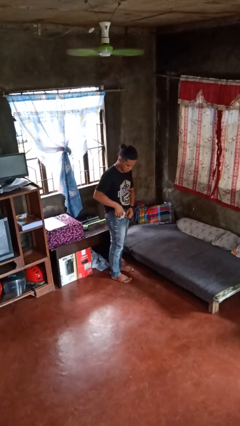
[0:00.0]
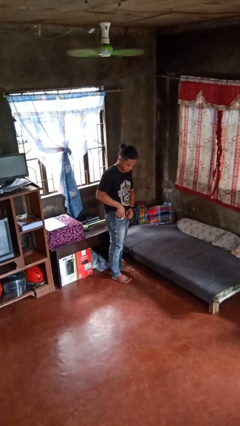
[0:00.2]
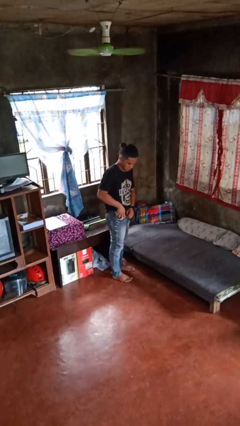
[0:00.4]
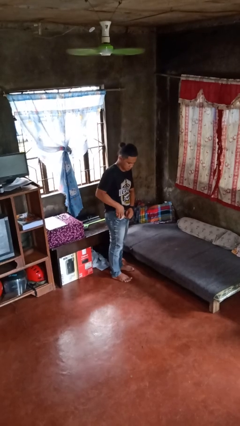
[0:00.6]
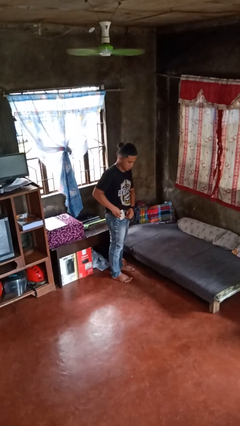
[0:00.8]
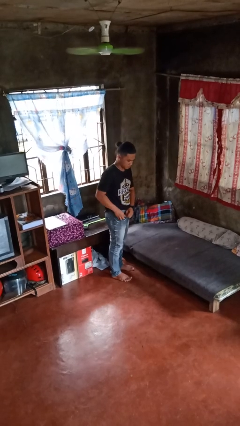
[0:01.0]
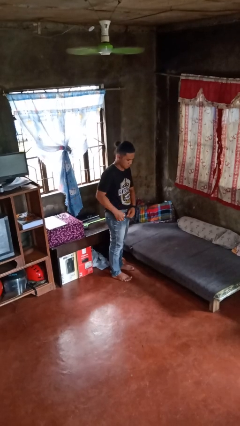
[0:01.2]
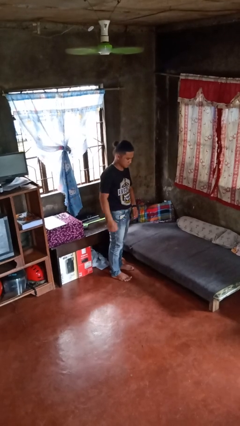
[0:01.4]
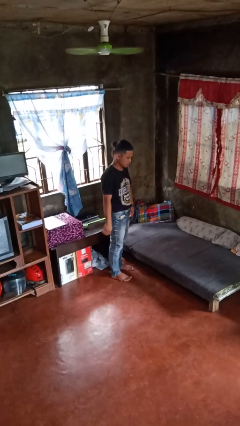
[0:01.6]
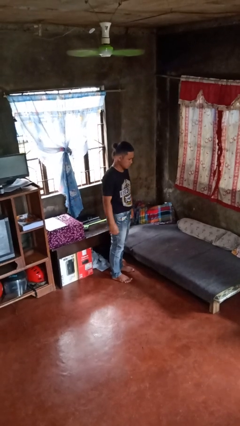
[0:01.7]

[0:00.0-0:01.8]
person puts phone into pocket

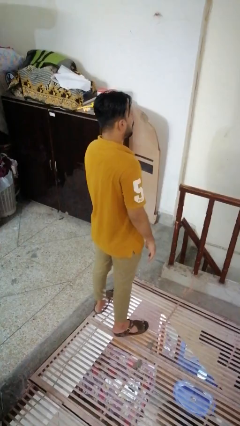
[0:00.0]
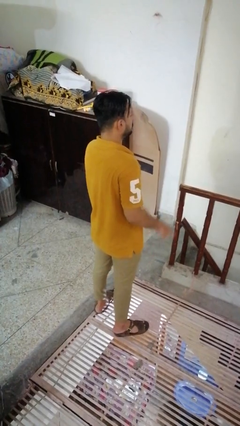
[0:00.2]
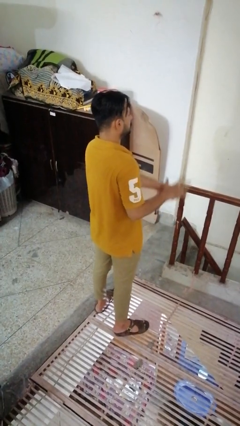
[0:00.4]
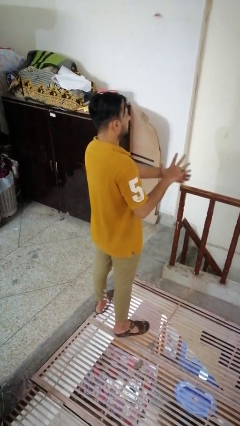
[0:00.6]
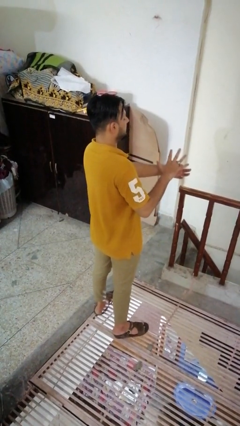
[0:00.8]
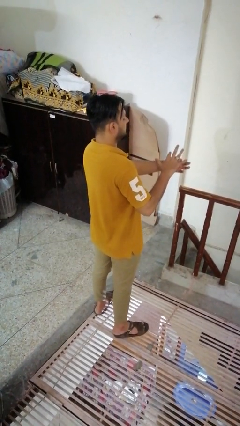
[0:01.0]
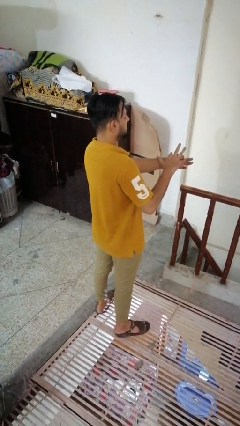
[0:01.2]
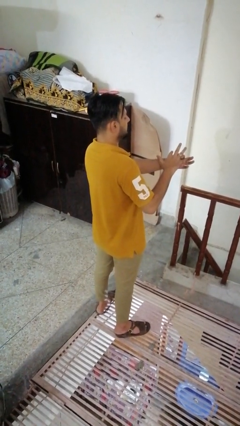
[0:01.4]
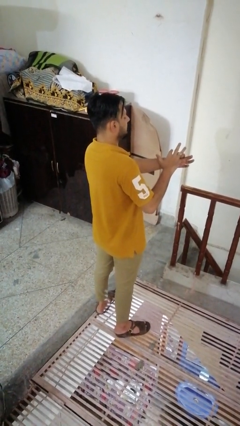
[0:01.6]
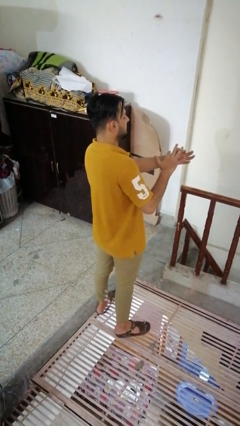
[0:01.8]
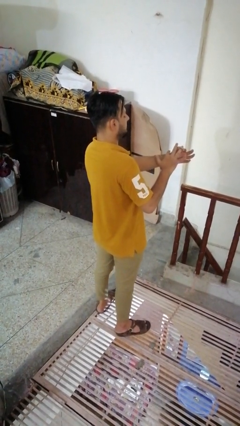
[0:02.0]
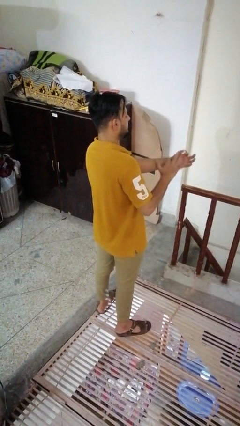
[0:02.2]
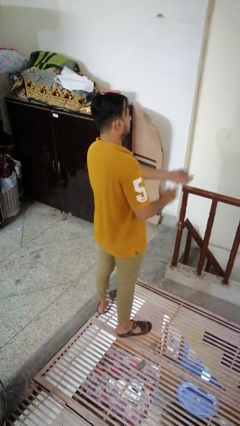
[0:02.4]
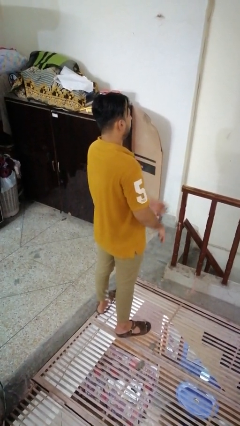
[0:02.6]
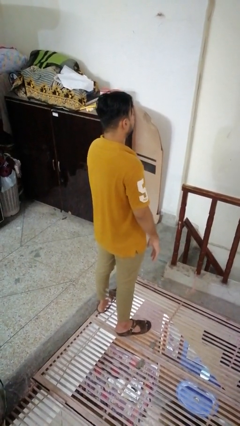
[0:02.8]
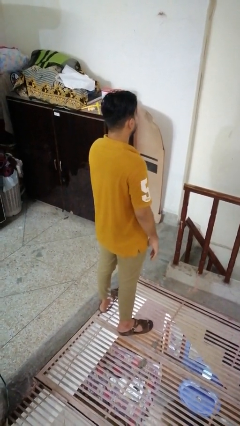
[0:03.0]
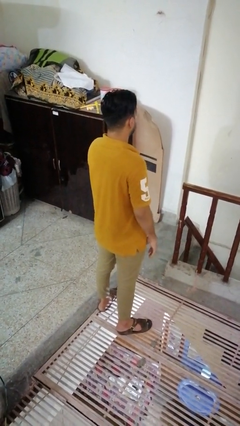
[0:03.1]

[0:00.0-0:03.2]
person takes off ring

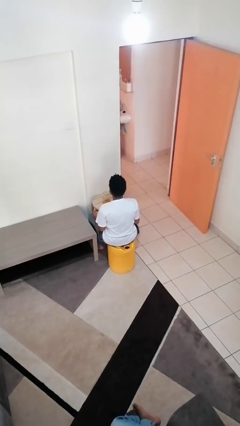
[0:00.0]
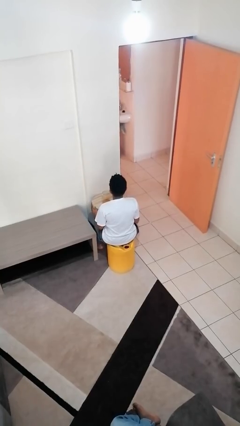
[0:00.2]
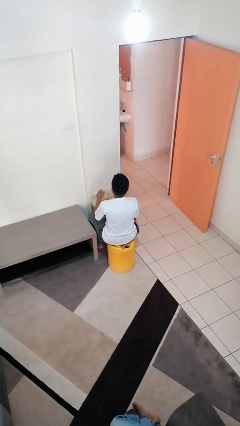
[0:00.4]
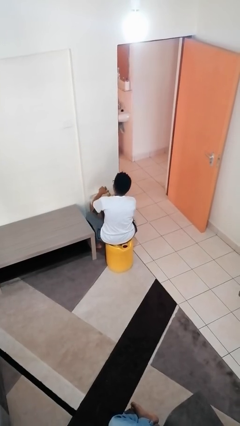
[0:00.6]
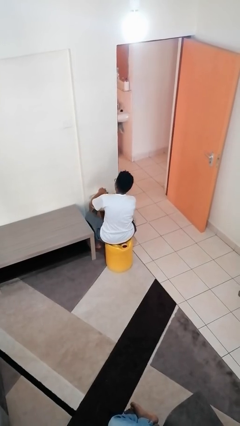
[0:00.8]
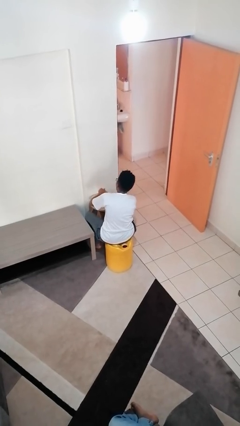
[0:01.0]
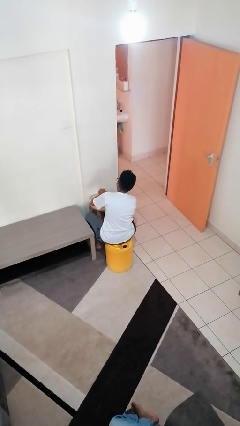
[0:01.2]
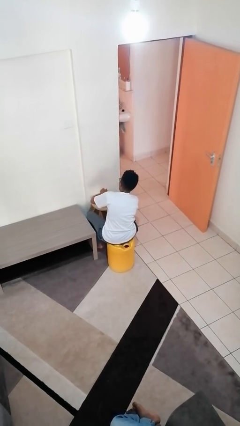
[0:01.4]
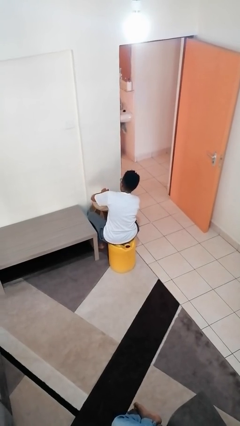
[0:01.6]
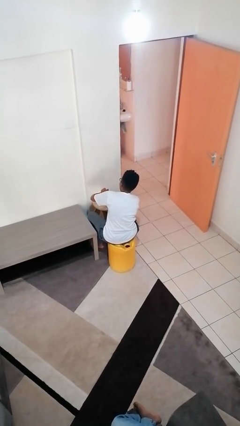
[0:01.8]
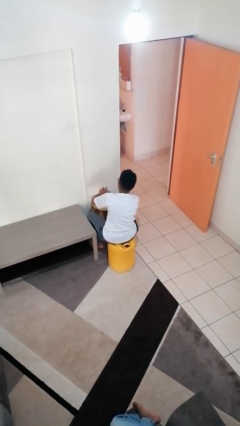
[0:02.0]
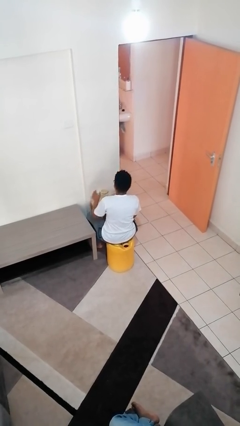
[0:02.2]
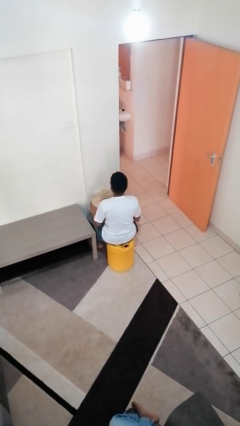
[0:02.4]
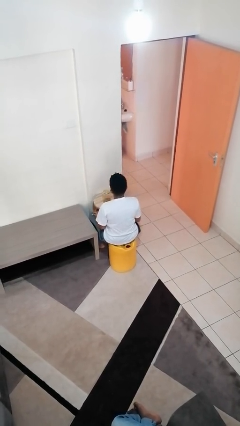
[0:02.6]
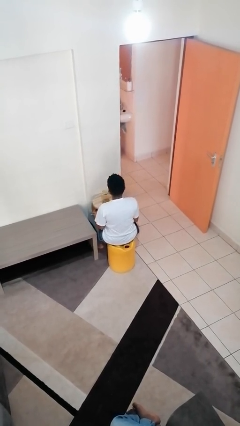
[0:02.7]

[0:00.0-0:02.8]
person closes jar

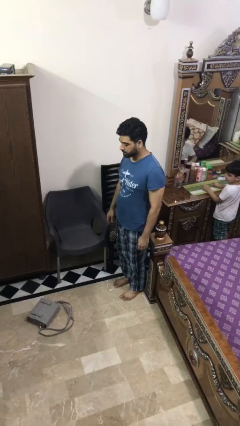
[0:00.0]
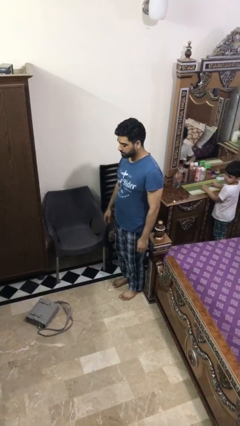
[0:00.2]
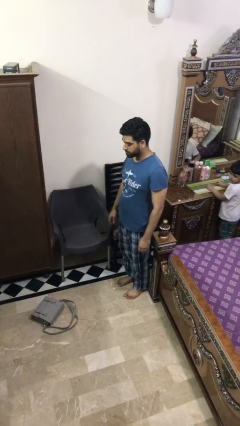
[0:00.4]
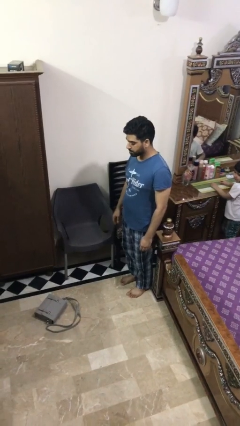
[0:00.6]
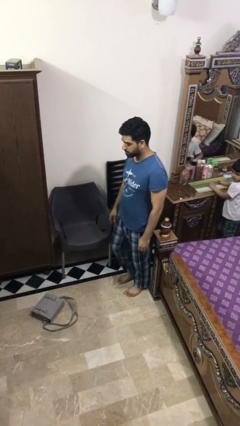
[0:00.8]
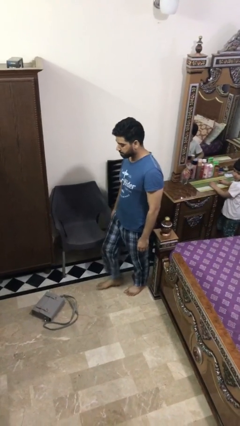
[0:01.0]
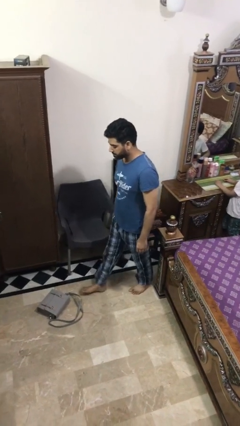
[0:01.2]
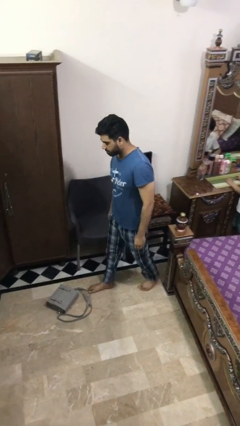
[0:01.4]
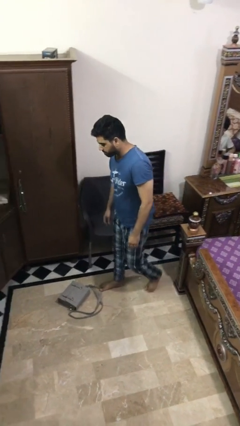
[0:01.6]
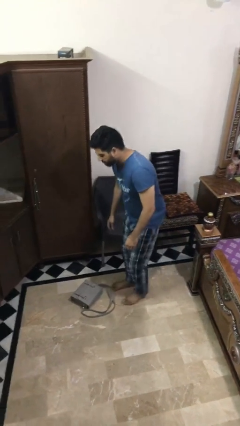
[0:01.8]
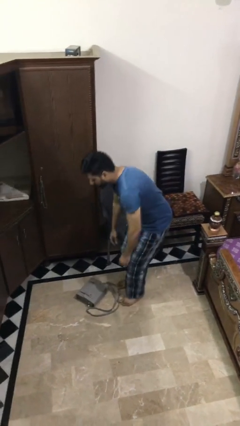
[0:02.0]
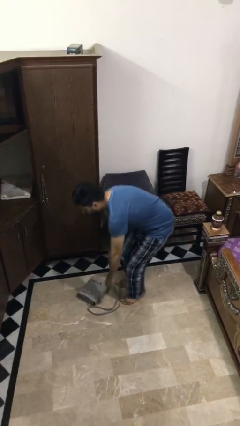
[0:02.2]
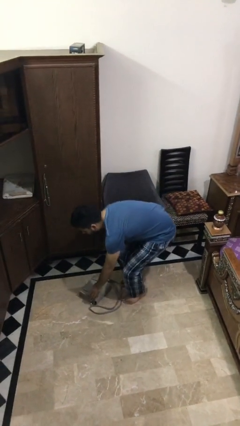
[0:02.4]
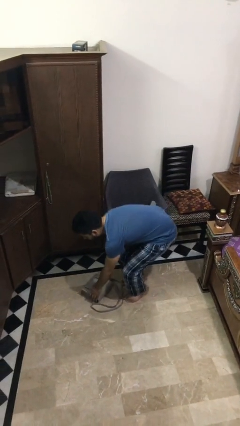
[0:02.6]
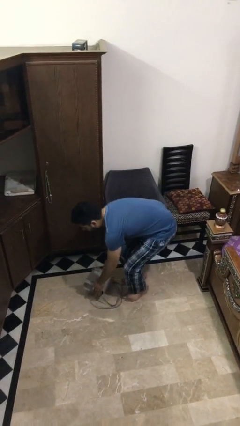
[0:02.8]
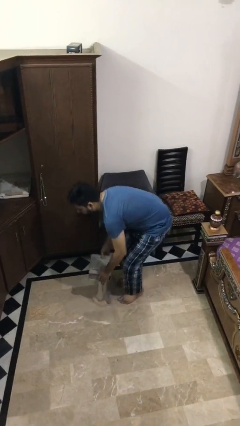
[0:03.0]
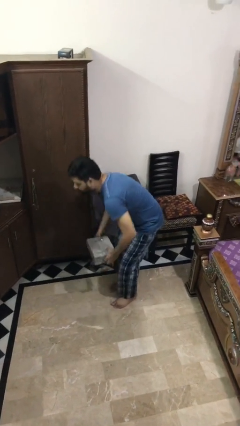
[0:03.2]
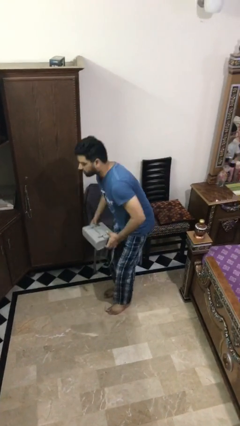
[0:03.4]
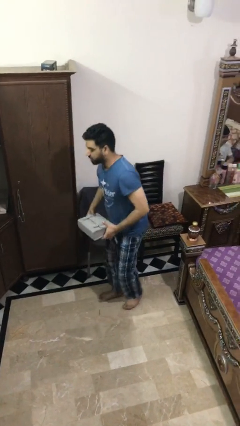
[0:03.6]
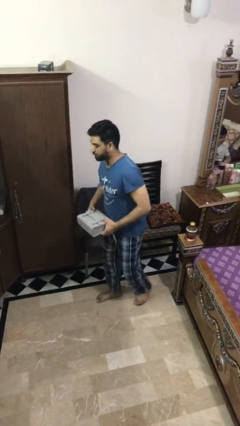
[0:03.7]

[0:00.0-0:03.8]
person picks up object from floor

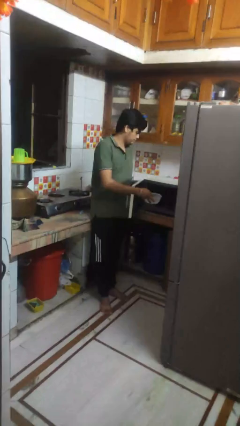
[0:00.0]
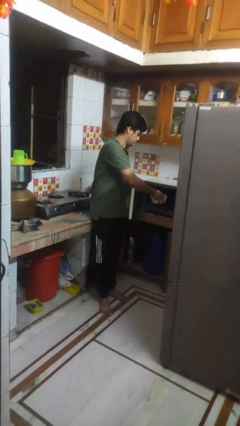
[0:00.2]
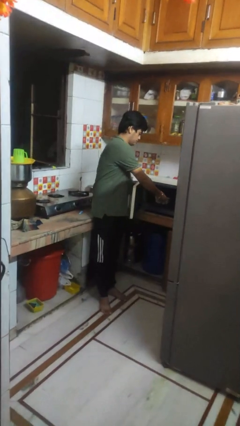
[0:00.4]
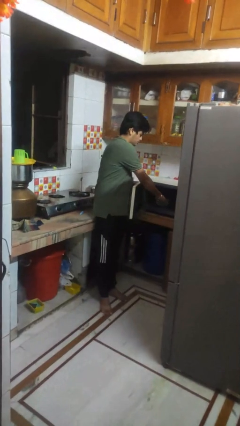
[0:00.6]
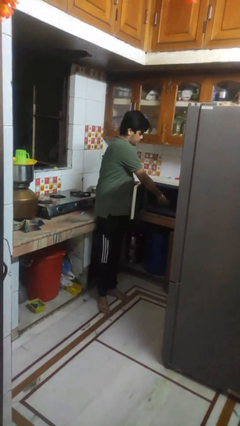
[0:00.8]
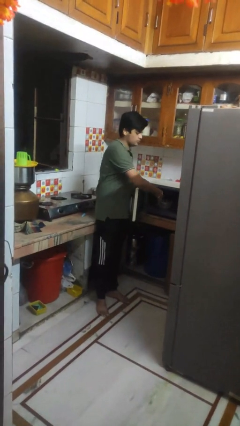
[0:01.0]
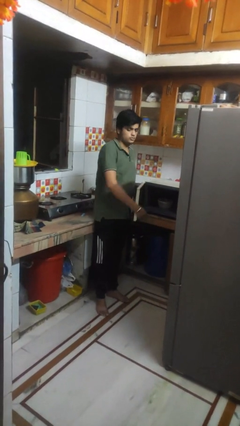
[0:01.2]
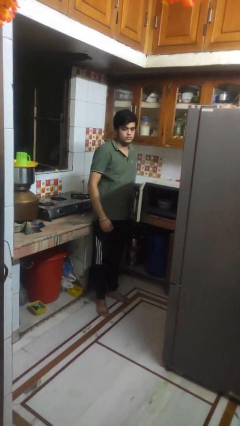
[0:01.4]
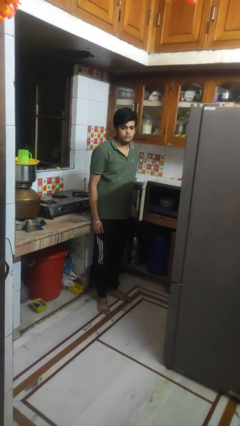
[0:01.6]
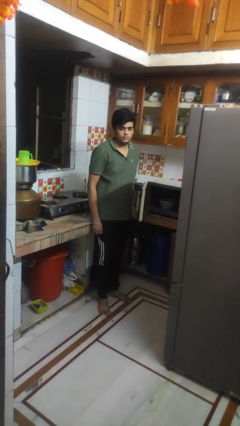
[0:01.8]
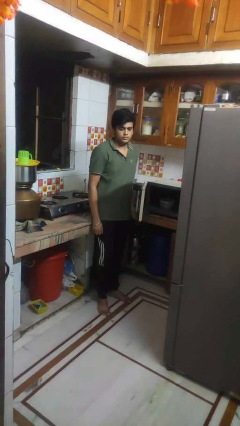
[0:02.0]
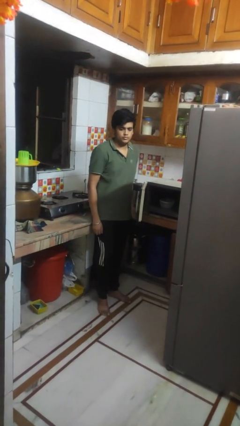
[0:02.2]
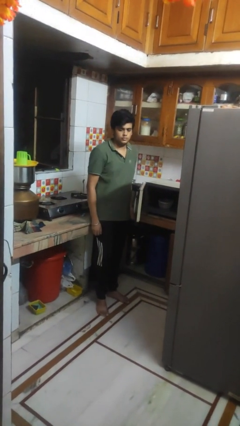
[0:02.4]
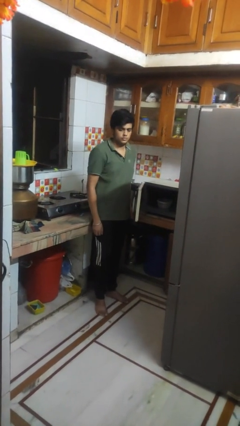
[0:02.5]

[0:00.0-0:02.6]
person puts object into microwave

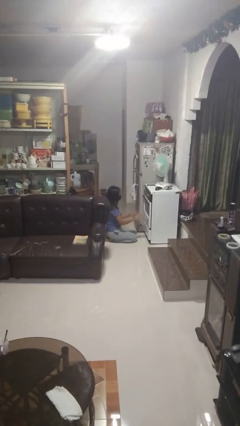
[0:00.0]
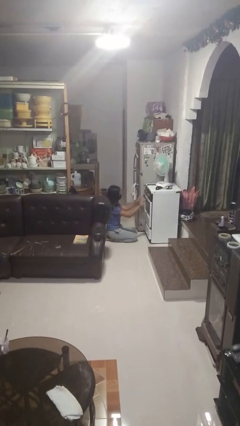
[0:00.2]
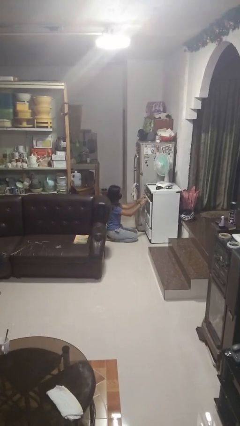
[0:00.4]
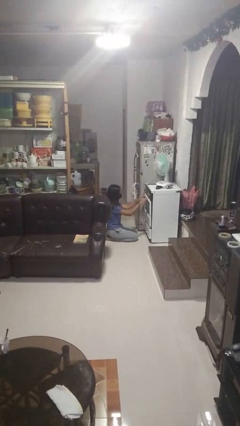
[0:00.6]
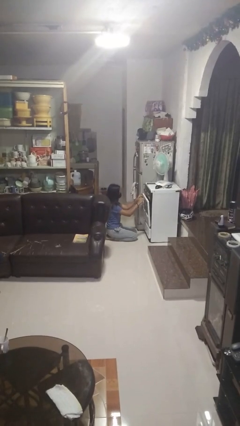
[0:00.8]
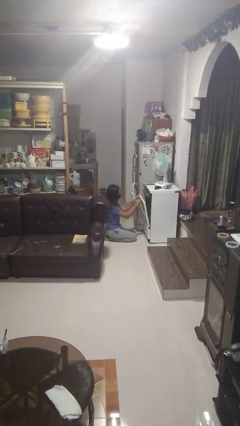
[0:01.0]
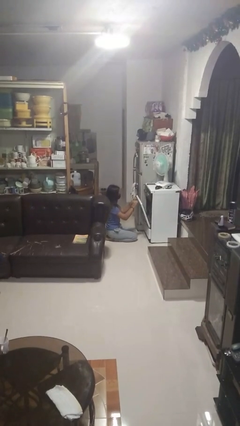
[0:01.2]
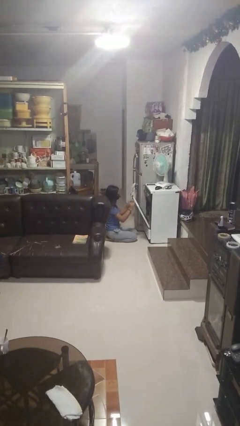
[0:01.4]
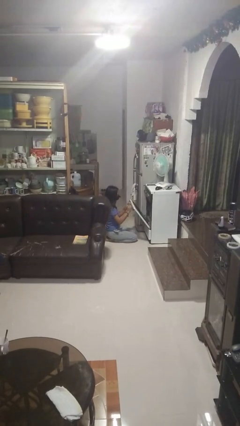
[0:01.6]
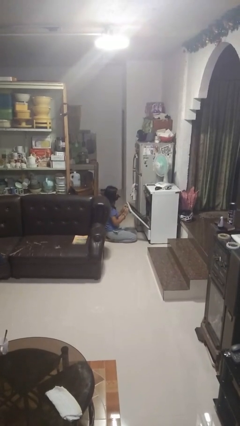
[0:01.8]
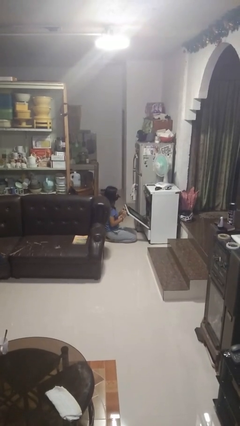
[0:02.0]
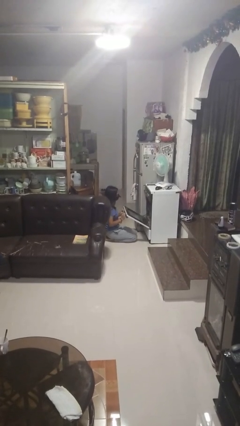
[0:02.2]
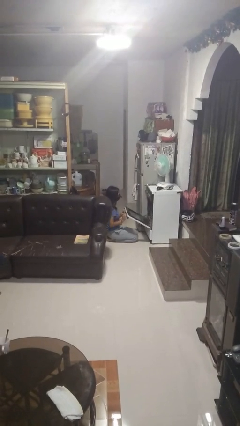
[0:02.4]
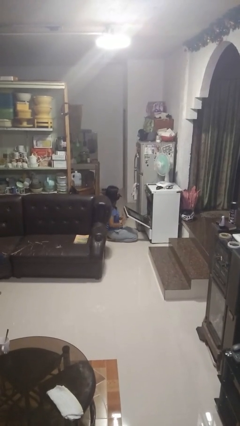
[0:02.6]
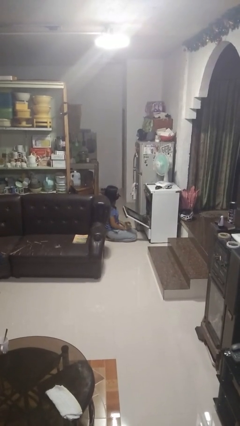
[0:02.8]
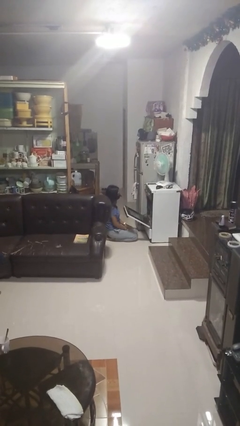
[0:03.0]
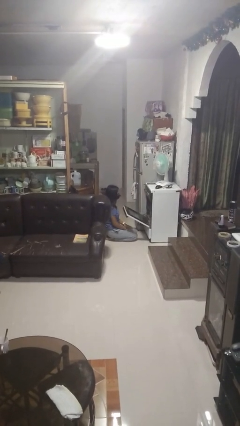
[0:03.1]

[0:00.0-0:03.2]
person opens oven door
